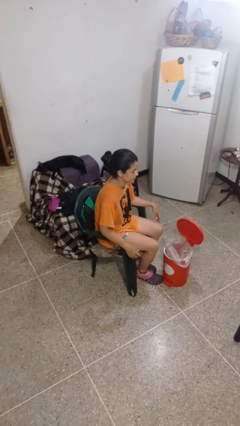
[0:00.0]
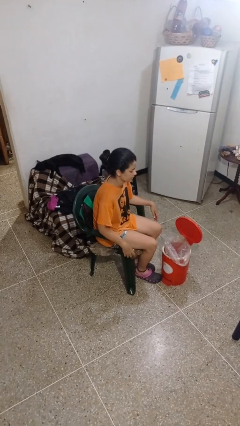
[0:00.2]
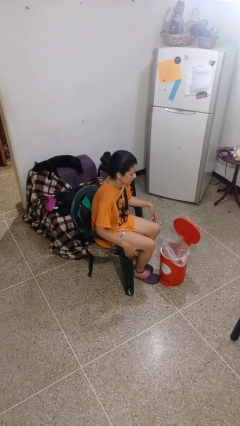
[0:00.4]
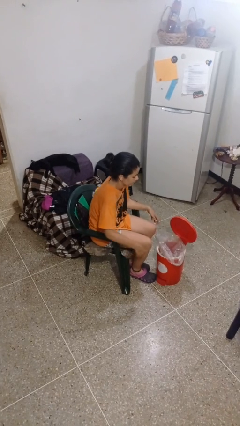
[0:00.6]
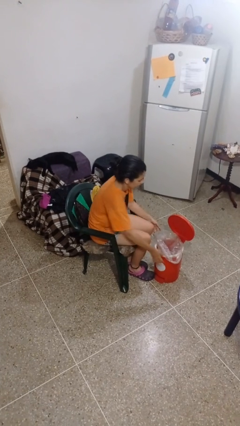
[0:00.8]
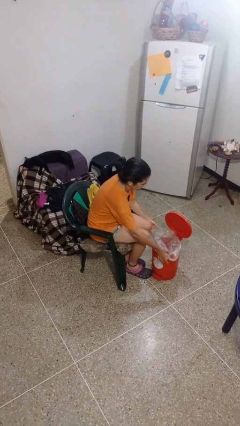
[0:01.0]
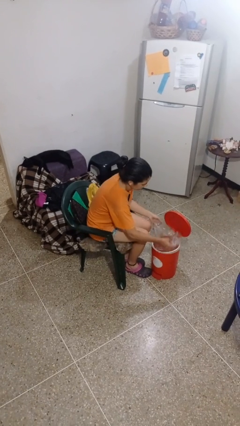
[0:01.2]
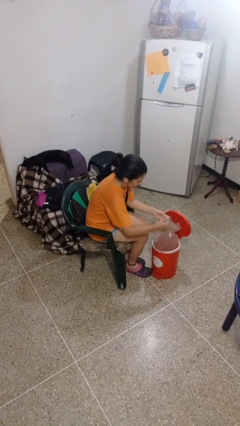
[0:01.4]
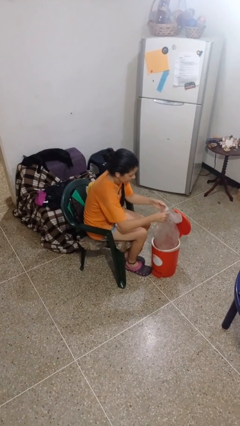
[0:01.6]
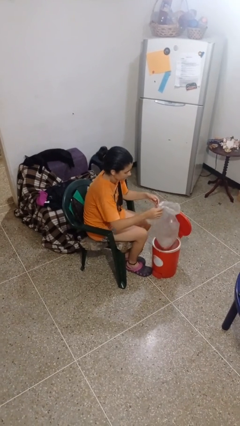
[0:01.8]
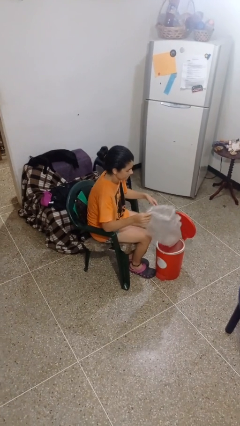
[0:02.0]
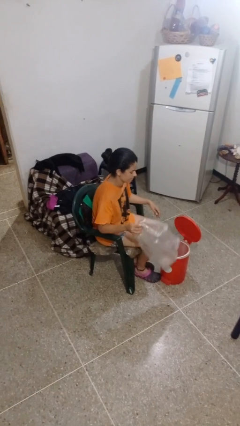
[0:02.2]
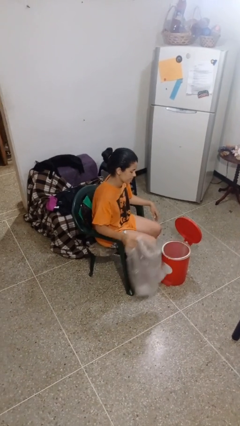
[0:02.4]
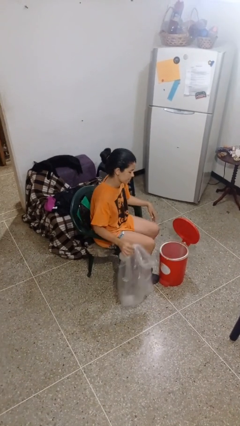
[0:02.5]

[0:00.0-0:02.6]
person removes trashbag from trashcan

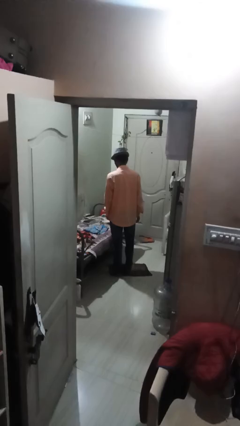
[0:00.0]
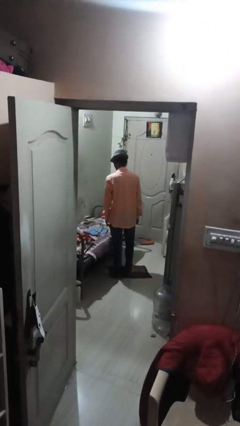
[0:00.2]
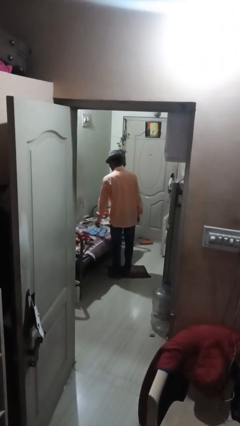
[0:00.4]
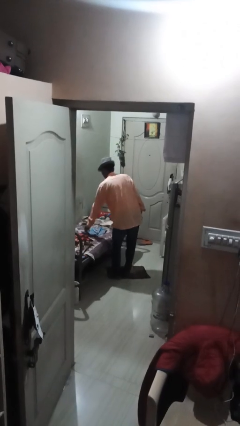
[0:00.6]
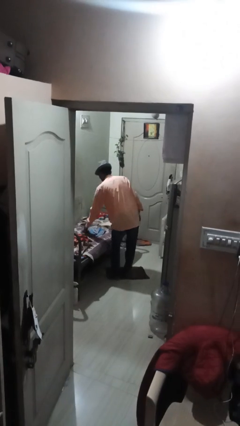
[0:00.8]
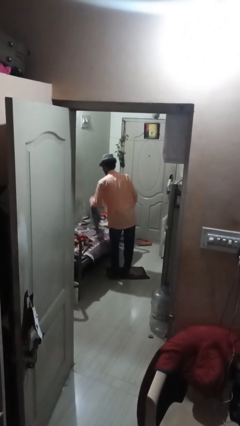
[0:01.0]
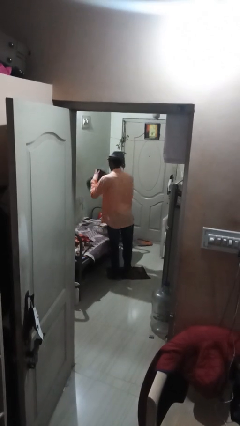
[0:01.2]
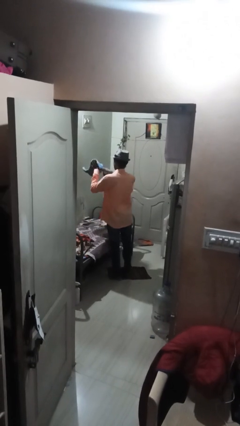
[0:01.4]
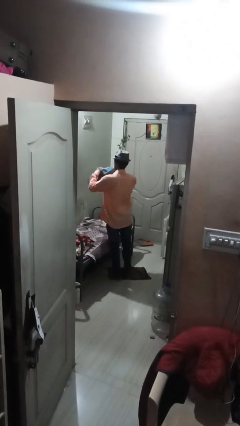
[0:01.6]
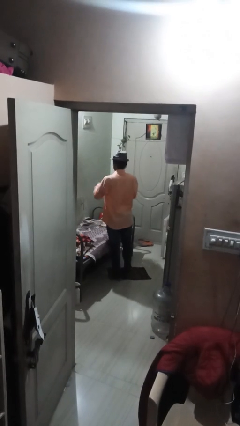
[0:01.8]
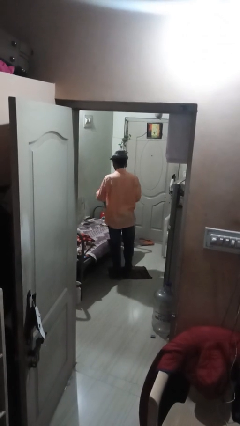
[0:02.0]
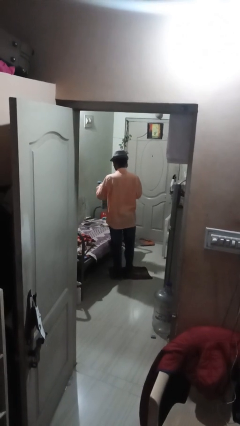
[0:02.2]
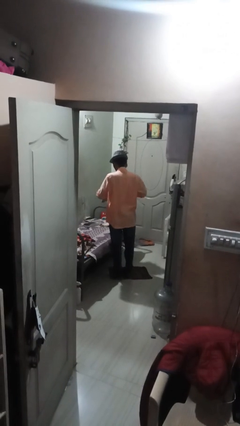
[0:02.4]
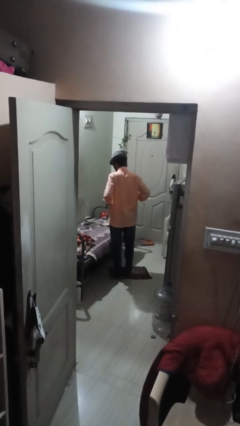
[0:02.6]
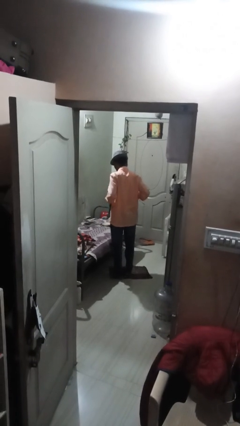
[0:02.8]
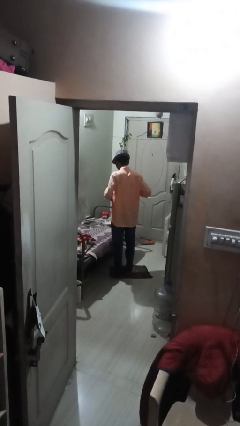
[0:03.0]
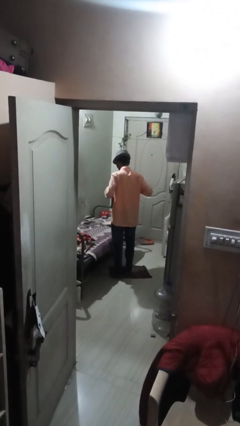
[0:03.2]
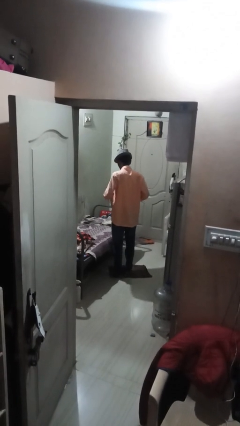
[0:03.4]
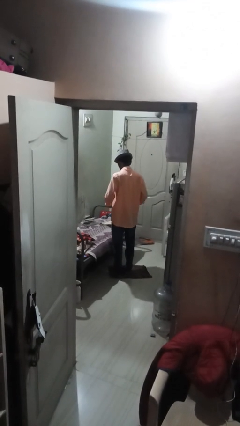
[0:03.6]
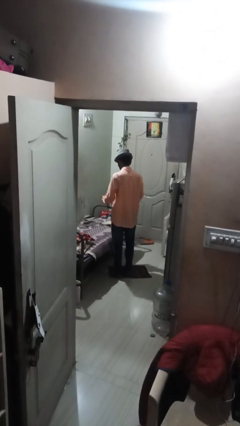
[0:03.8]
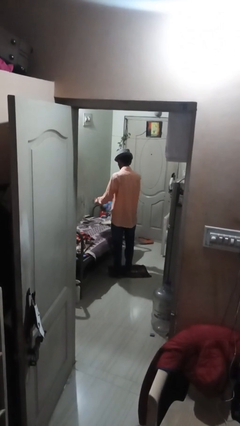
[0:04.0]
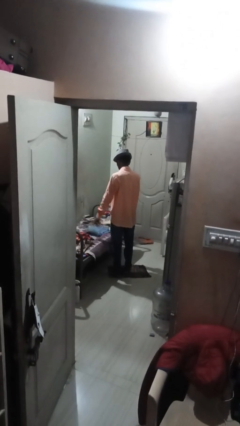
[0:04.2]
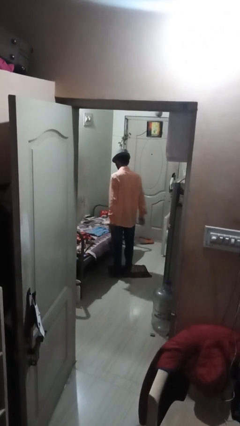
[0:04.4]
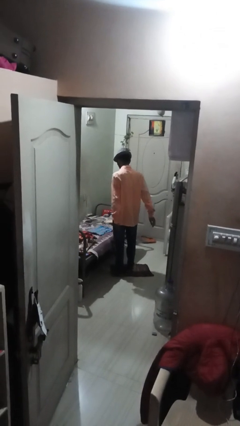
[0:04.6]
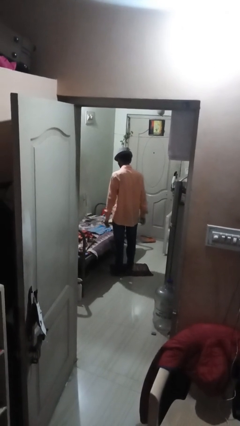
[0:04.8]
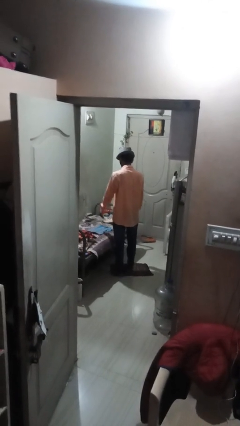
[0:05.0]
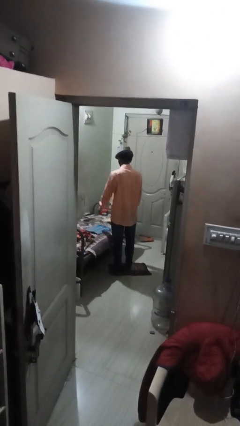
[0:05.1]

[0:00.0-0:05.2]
person folds towel

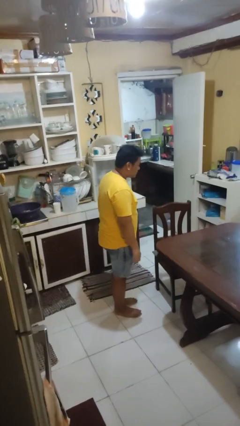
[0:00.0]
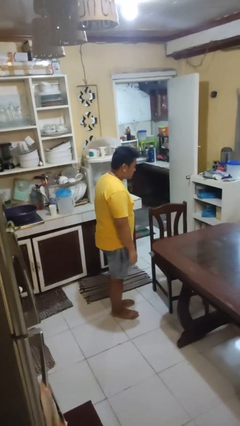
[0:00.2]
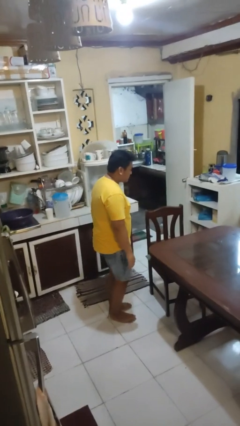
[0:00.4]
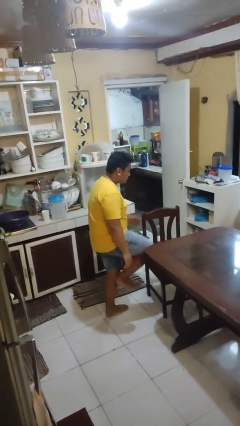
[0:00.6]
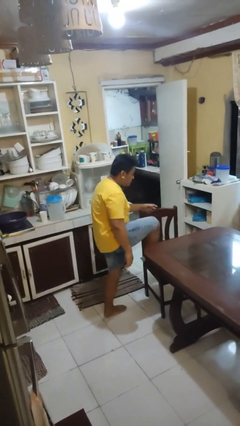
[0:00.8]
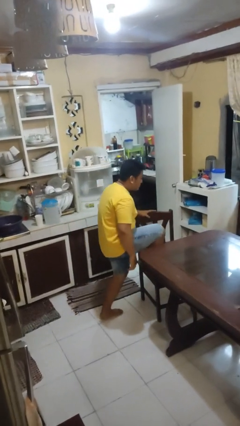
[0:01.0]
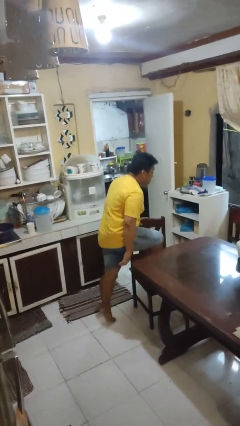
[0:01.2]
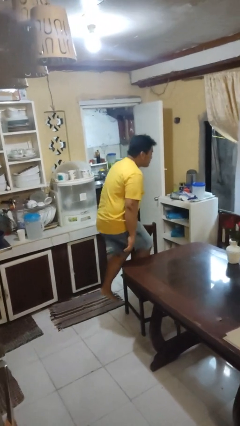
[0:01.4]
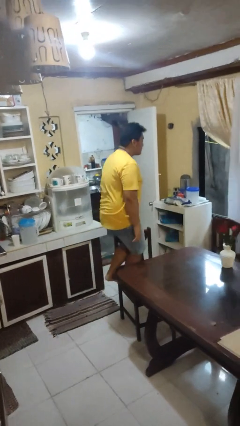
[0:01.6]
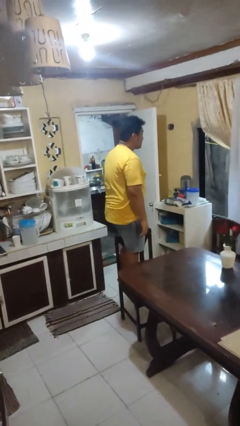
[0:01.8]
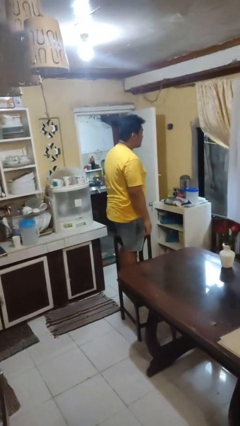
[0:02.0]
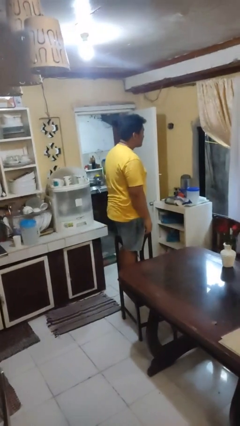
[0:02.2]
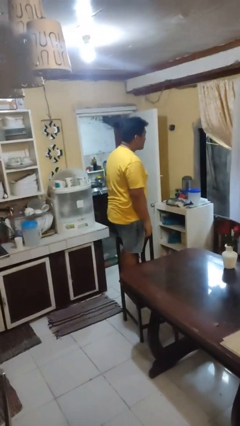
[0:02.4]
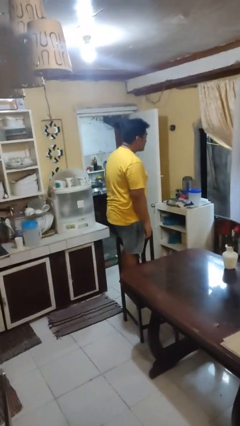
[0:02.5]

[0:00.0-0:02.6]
person climbs on chair

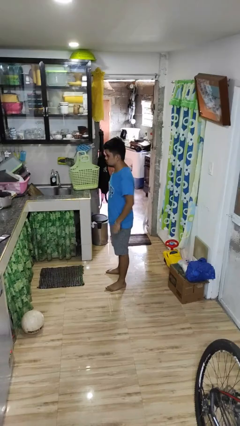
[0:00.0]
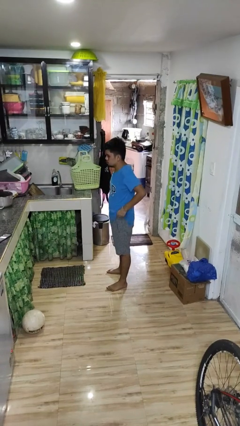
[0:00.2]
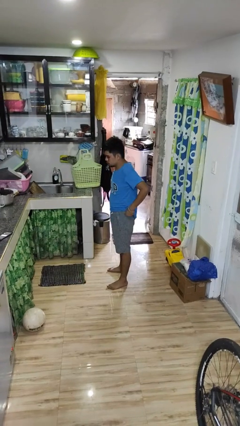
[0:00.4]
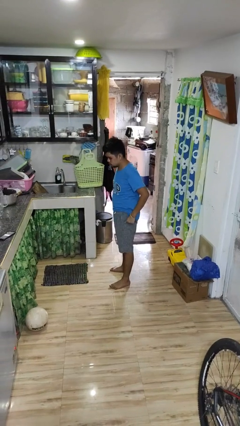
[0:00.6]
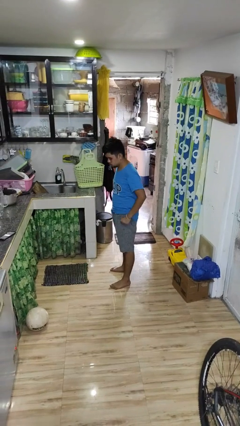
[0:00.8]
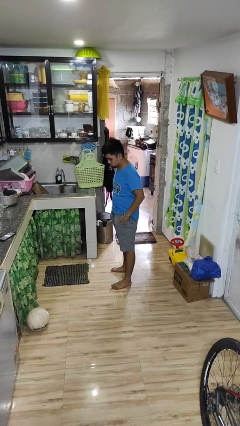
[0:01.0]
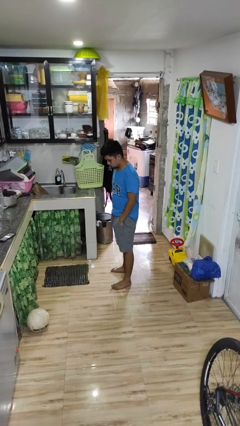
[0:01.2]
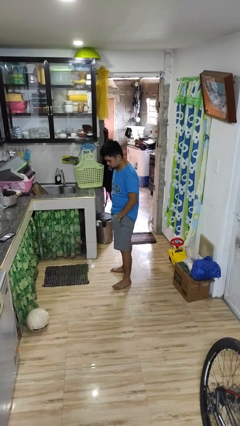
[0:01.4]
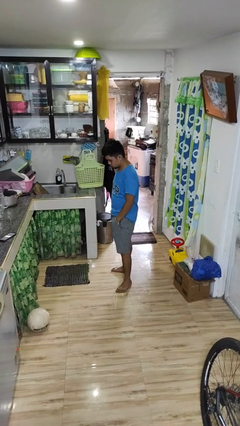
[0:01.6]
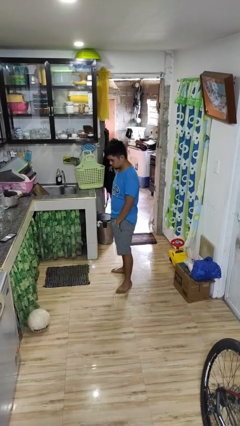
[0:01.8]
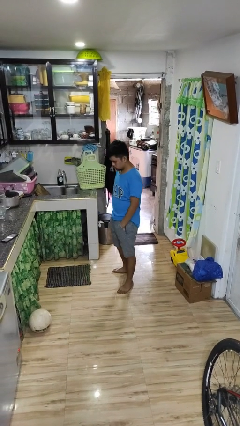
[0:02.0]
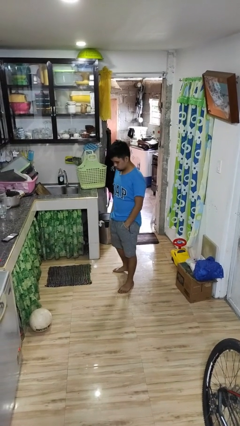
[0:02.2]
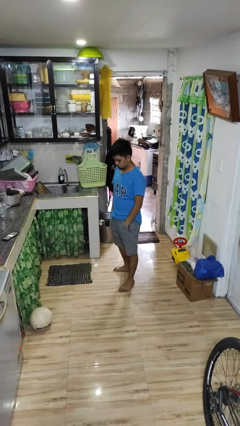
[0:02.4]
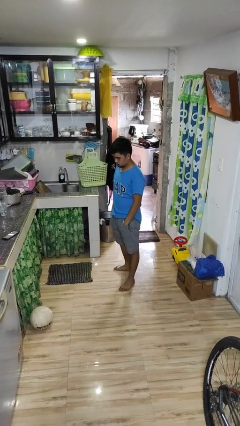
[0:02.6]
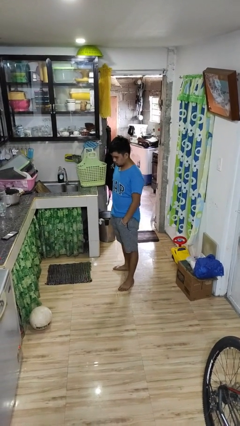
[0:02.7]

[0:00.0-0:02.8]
person puts hands in back pockets

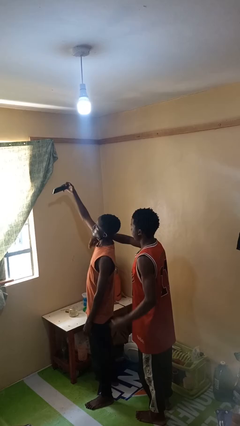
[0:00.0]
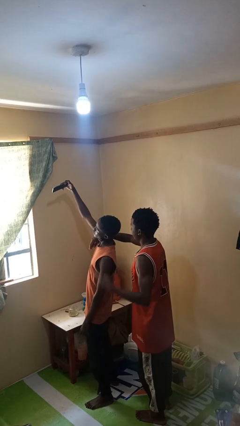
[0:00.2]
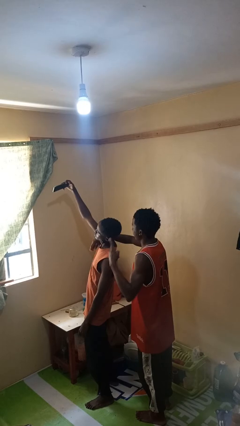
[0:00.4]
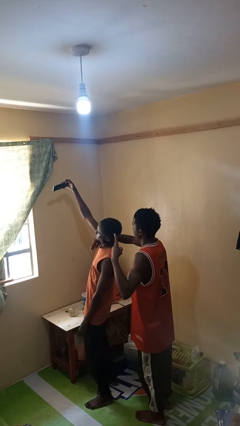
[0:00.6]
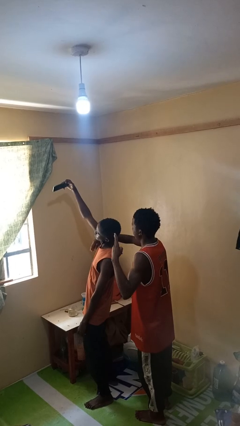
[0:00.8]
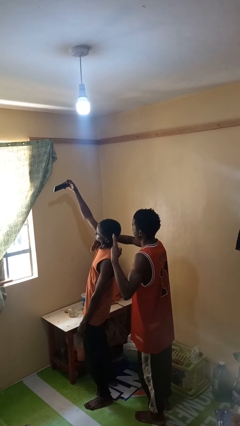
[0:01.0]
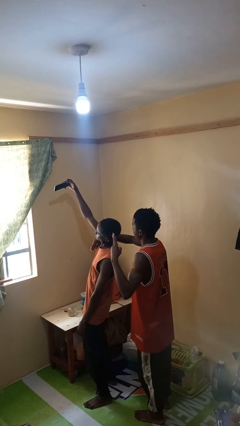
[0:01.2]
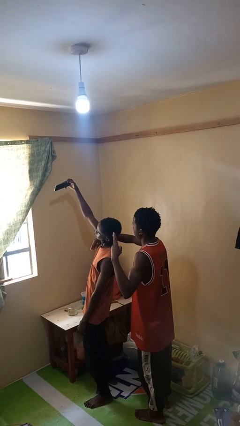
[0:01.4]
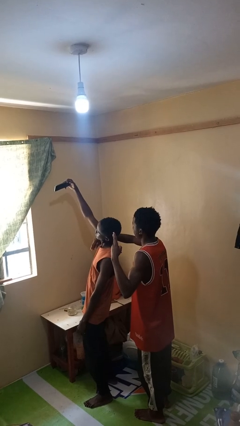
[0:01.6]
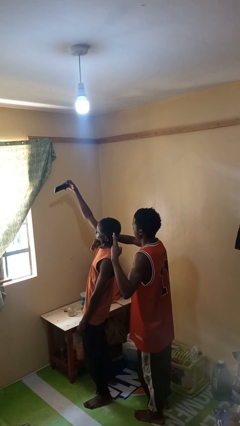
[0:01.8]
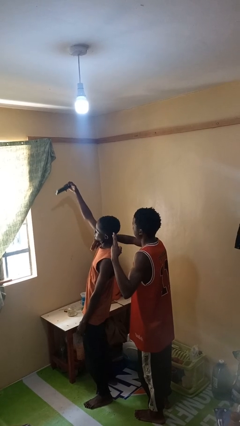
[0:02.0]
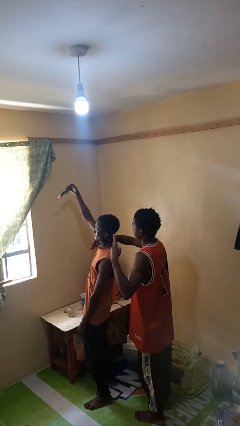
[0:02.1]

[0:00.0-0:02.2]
person takes selfie with person

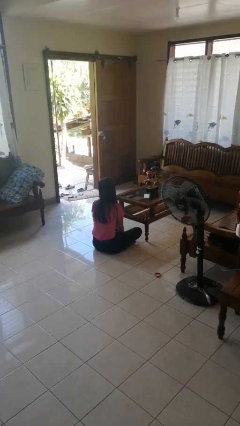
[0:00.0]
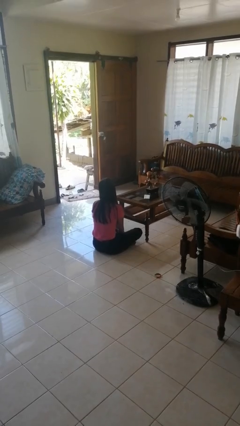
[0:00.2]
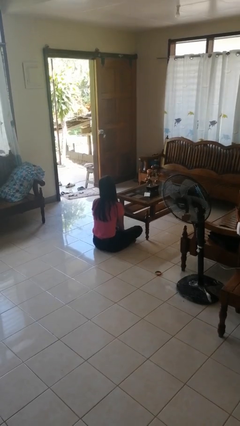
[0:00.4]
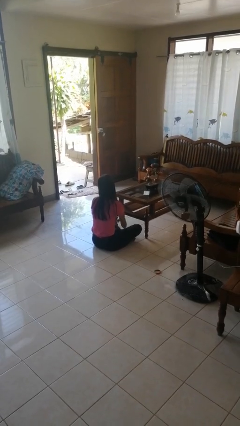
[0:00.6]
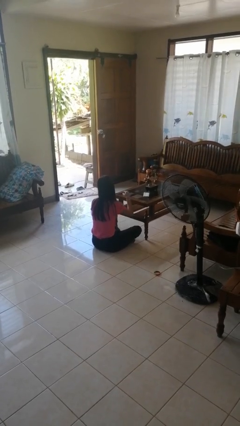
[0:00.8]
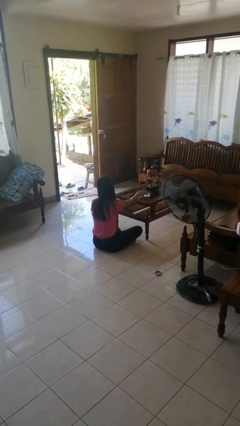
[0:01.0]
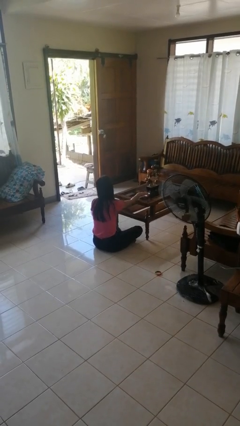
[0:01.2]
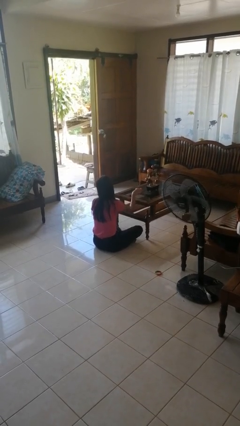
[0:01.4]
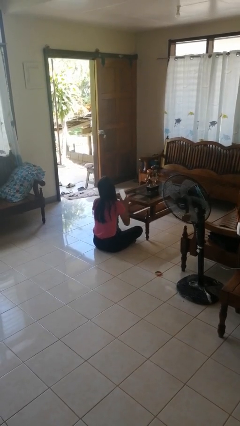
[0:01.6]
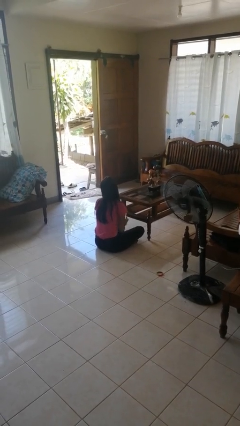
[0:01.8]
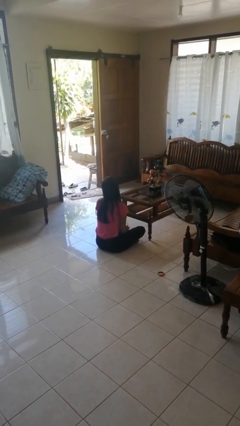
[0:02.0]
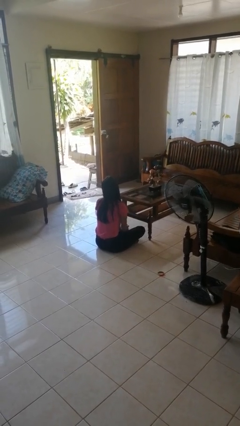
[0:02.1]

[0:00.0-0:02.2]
person picks up object from table
